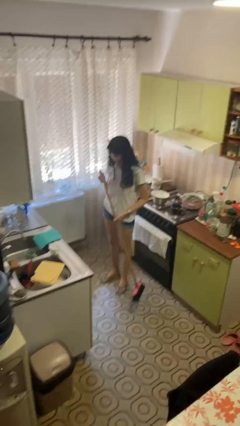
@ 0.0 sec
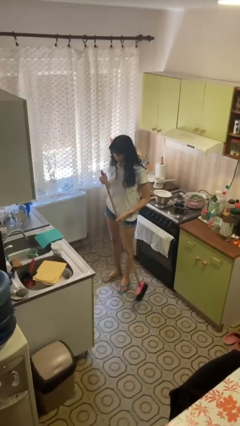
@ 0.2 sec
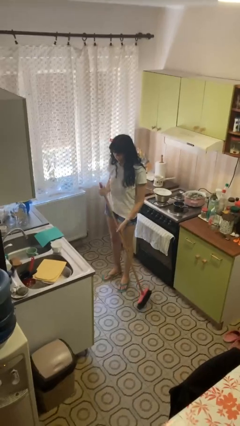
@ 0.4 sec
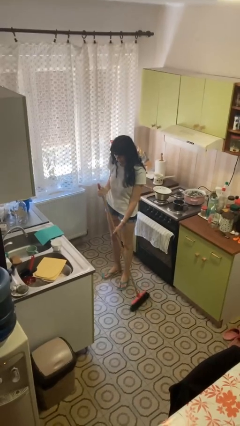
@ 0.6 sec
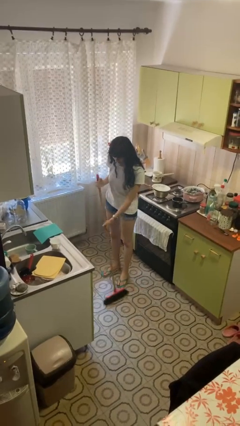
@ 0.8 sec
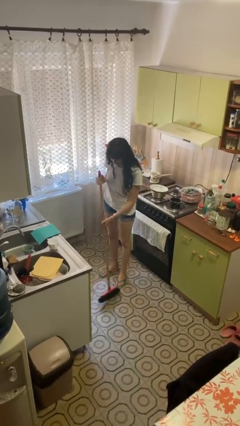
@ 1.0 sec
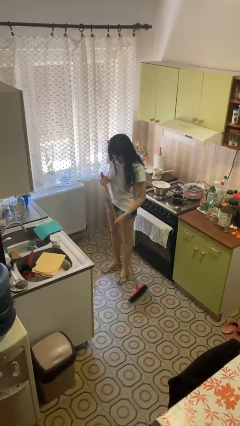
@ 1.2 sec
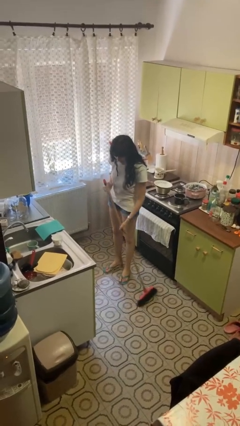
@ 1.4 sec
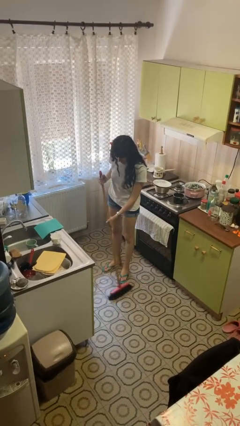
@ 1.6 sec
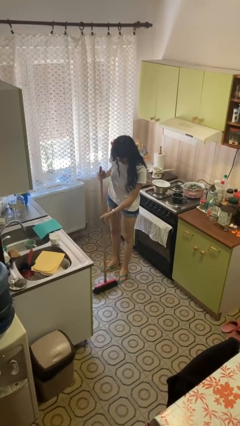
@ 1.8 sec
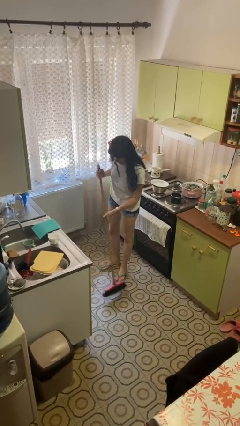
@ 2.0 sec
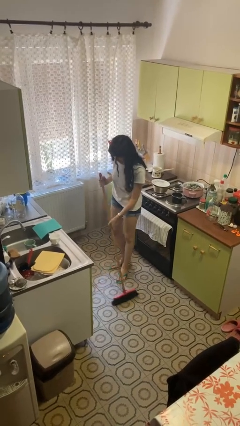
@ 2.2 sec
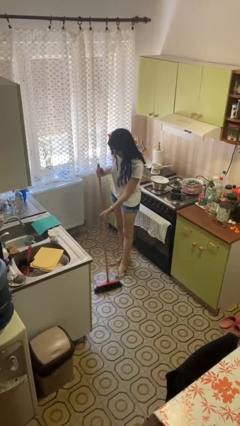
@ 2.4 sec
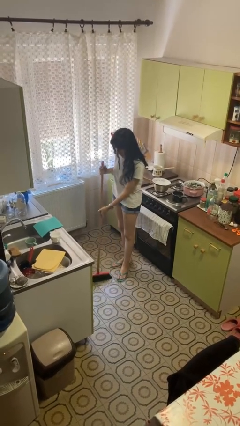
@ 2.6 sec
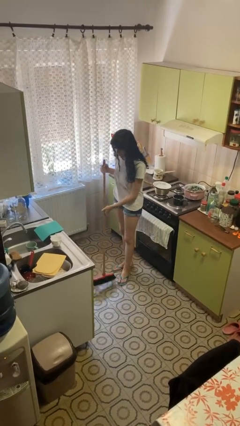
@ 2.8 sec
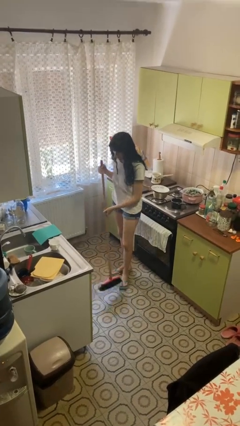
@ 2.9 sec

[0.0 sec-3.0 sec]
person sweeps floor

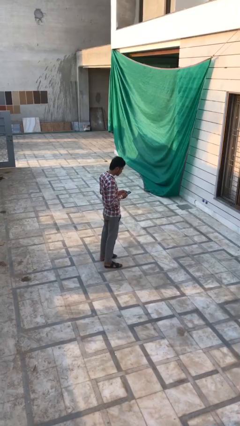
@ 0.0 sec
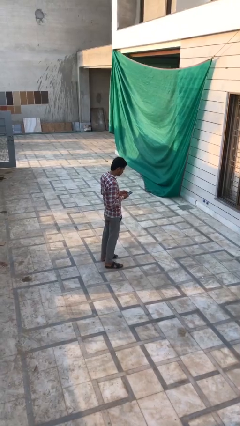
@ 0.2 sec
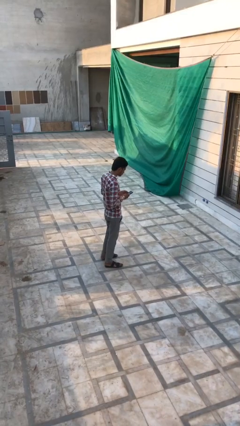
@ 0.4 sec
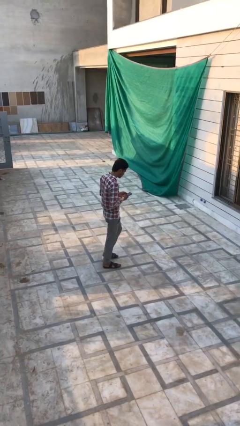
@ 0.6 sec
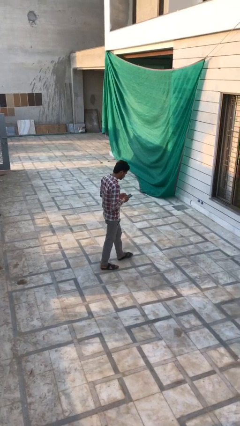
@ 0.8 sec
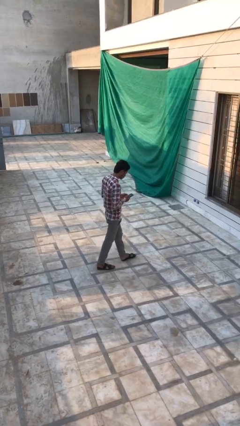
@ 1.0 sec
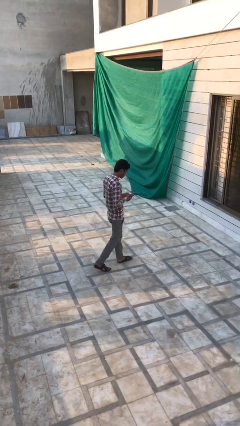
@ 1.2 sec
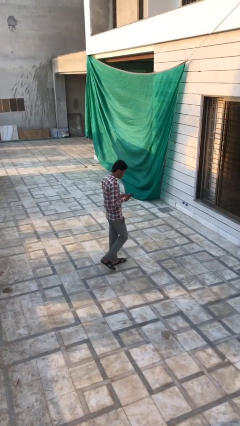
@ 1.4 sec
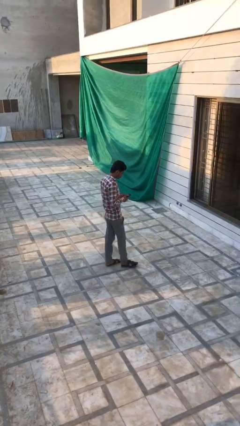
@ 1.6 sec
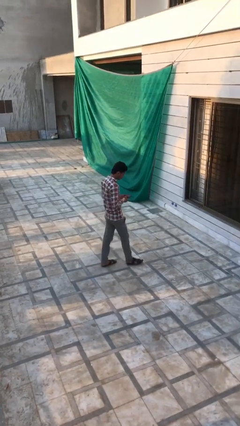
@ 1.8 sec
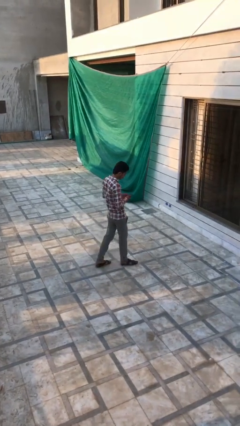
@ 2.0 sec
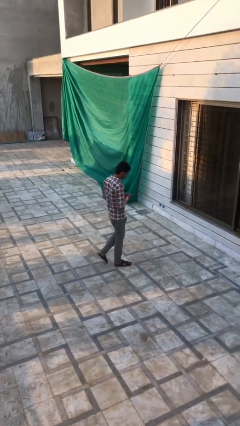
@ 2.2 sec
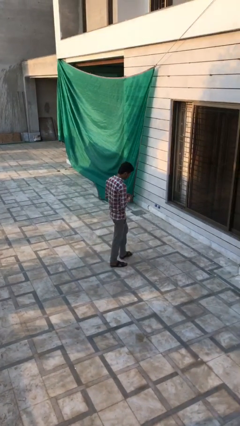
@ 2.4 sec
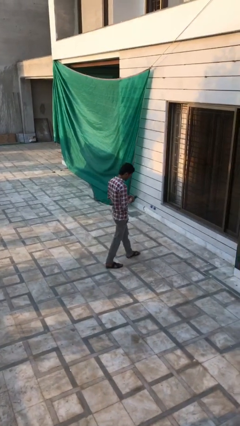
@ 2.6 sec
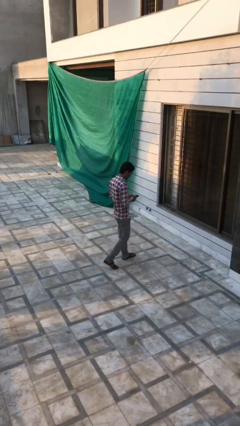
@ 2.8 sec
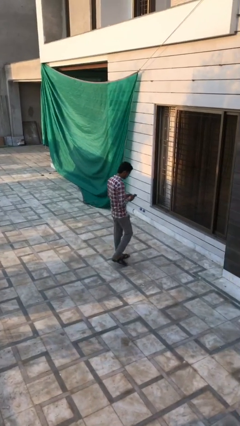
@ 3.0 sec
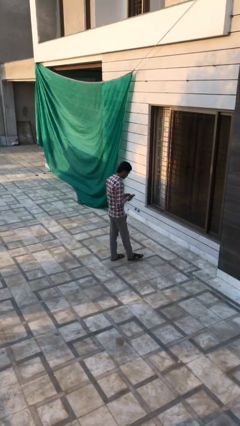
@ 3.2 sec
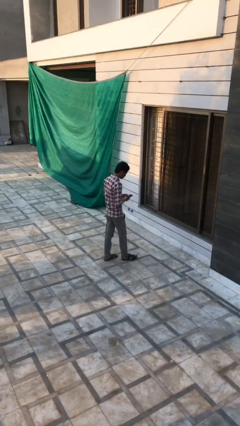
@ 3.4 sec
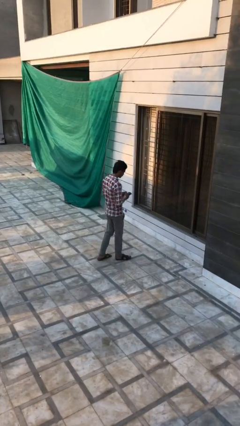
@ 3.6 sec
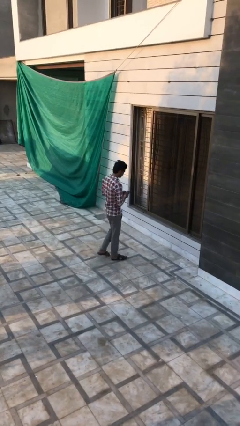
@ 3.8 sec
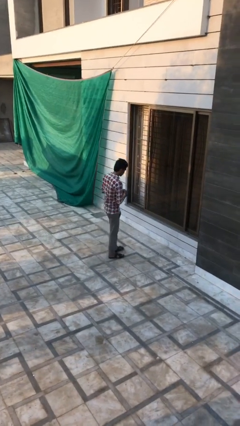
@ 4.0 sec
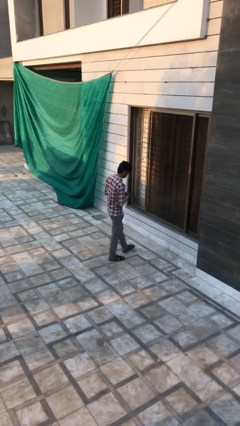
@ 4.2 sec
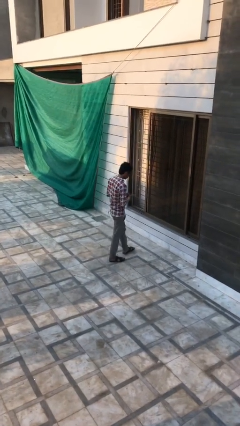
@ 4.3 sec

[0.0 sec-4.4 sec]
person texts on phone

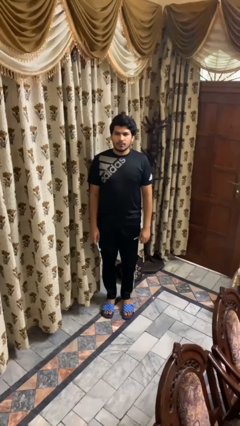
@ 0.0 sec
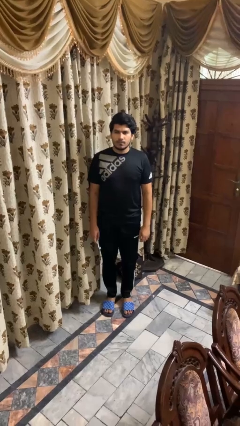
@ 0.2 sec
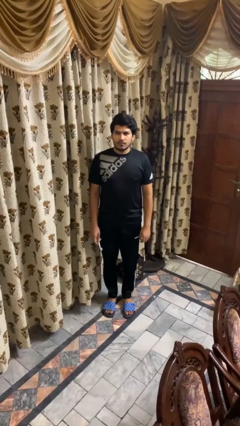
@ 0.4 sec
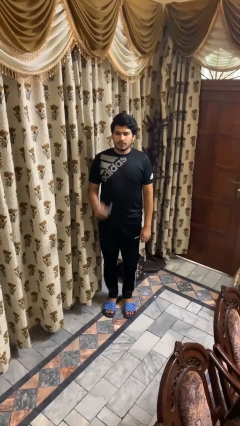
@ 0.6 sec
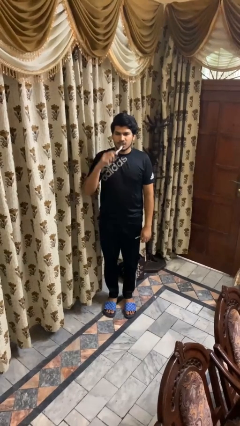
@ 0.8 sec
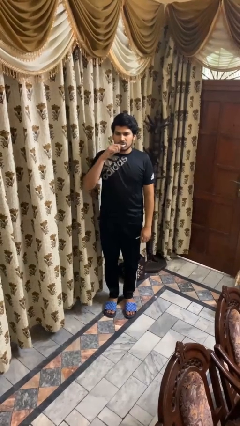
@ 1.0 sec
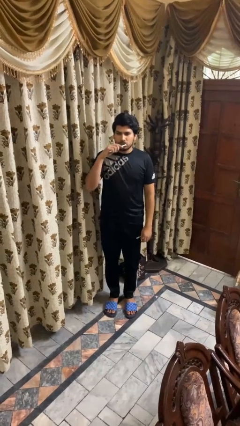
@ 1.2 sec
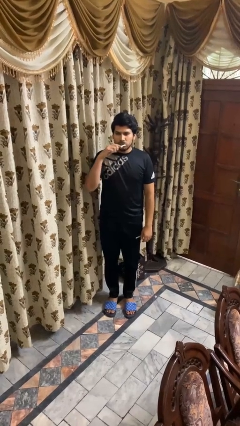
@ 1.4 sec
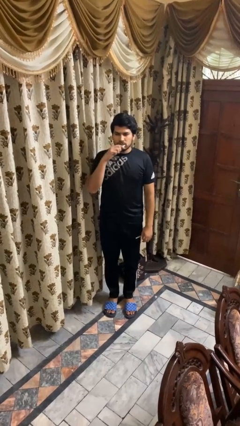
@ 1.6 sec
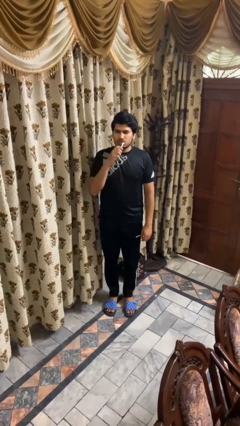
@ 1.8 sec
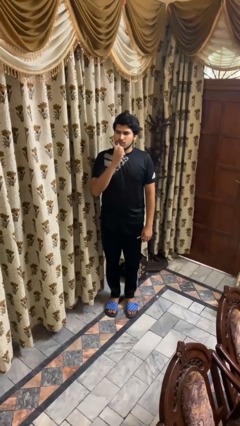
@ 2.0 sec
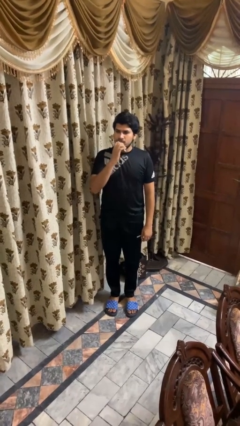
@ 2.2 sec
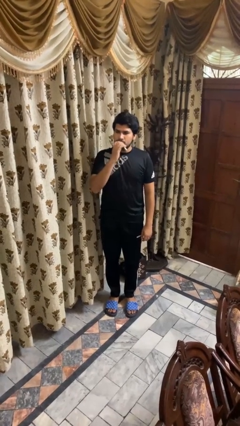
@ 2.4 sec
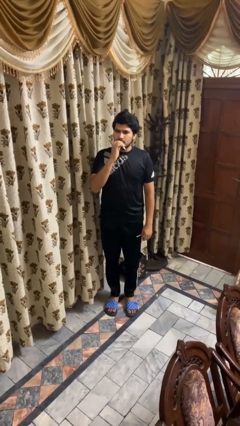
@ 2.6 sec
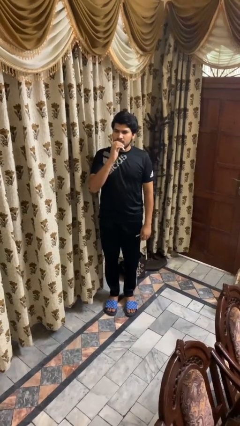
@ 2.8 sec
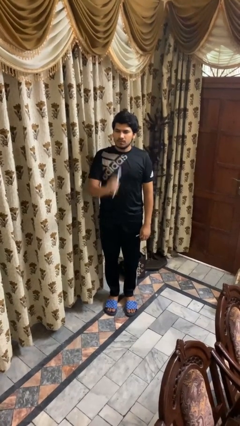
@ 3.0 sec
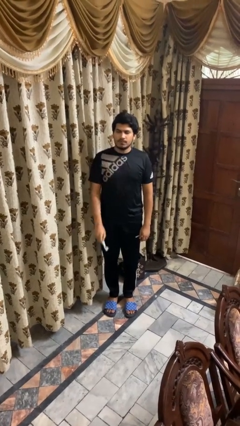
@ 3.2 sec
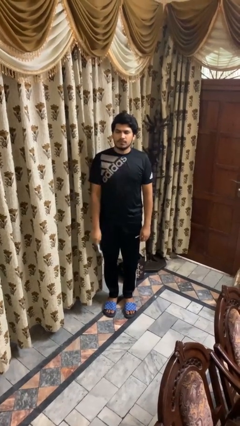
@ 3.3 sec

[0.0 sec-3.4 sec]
person brushes teeth

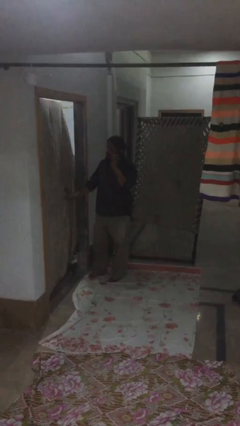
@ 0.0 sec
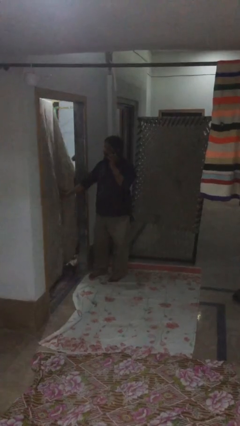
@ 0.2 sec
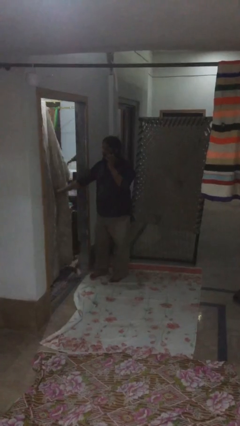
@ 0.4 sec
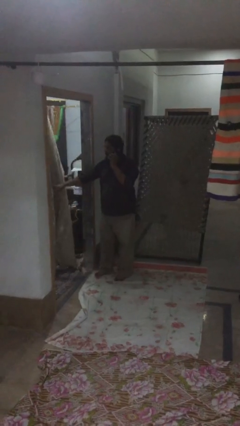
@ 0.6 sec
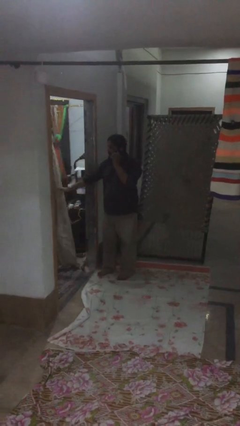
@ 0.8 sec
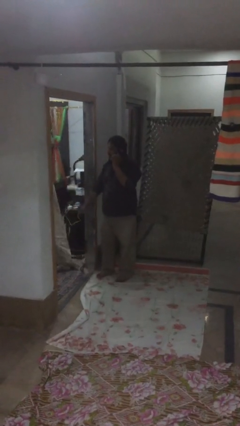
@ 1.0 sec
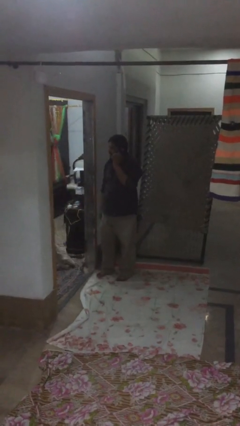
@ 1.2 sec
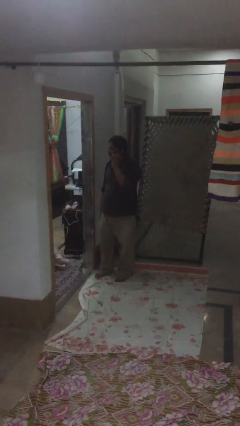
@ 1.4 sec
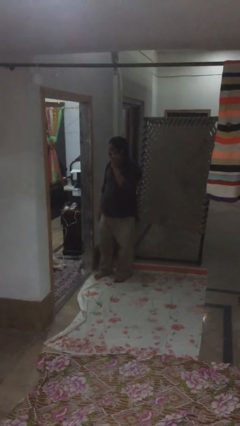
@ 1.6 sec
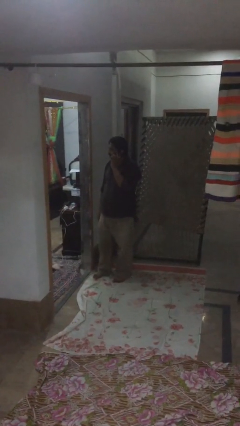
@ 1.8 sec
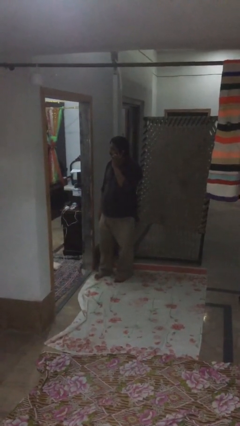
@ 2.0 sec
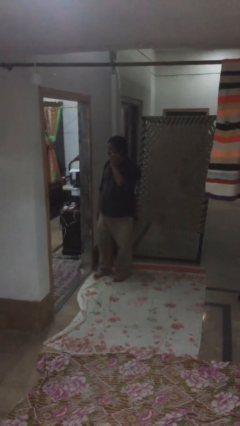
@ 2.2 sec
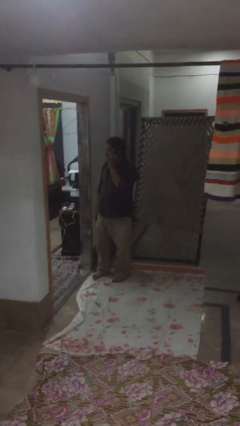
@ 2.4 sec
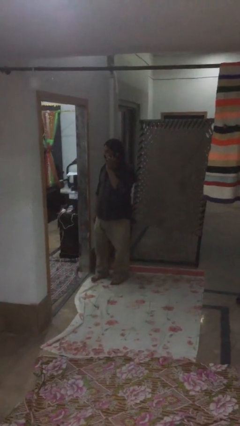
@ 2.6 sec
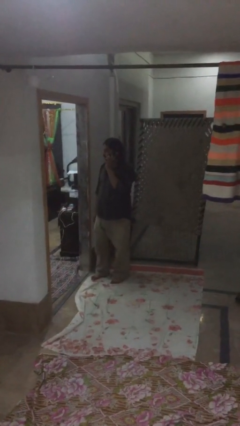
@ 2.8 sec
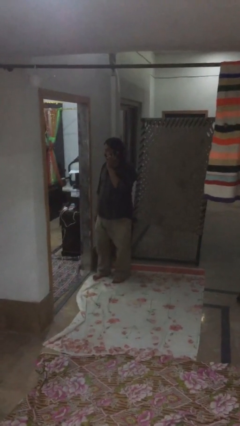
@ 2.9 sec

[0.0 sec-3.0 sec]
person opens facility door

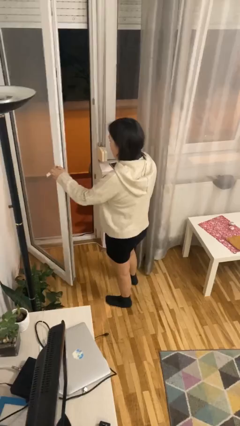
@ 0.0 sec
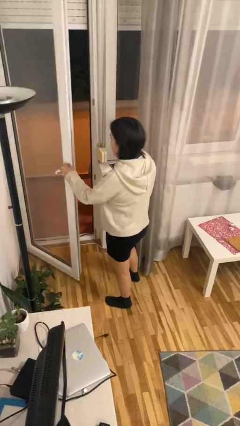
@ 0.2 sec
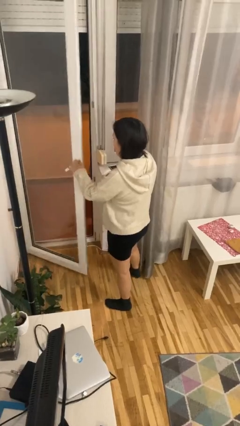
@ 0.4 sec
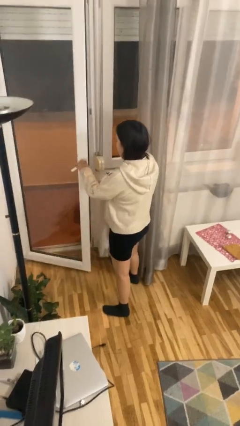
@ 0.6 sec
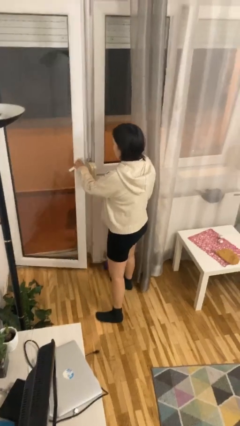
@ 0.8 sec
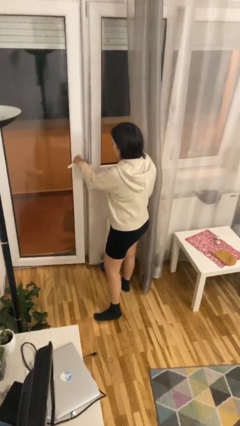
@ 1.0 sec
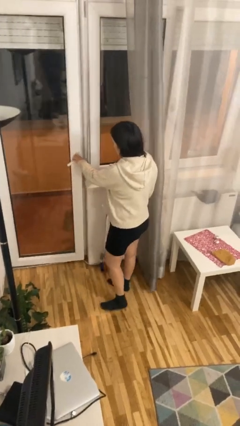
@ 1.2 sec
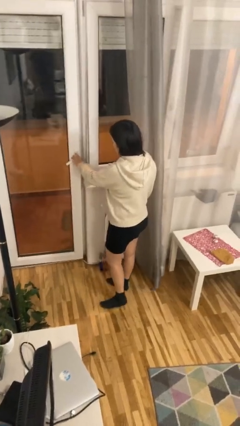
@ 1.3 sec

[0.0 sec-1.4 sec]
person closes facility door

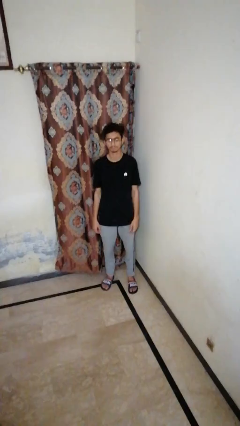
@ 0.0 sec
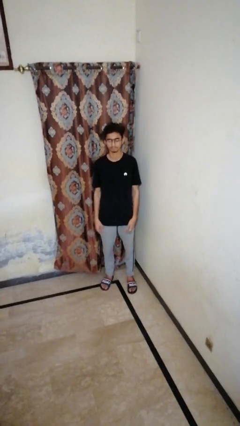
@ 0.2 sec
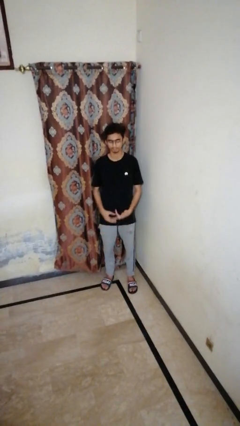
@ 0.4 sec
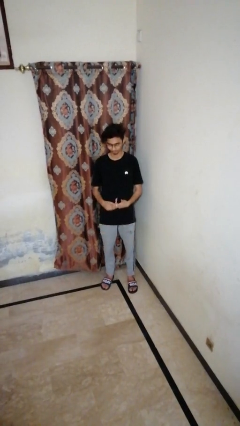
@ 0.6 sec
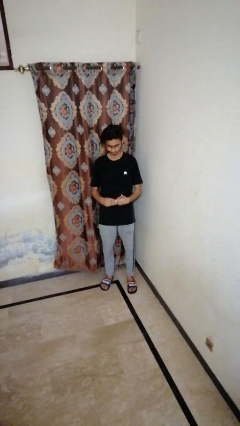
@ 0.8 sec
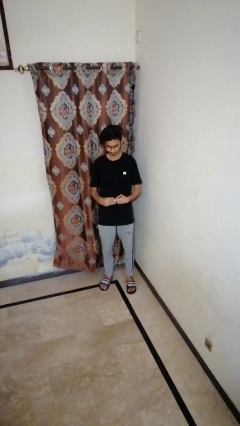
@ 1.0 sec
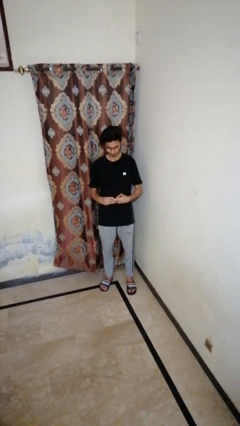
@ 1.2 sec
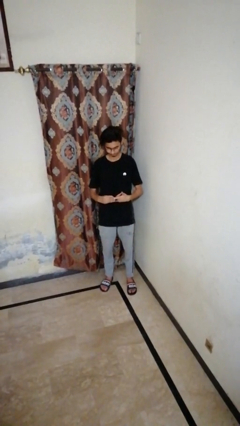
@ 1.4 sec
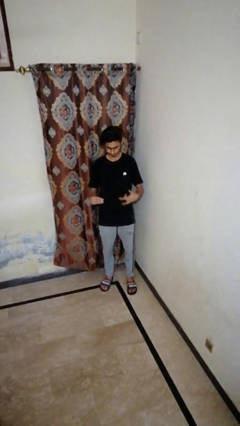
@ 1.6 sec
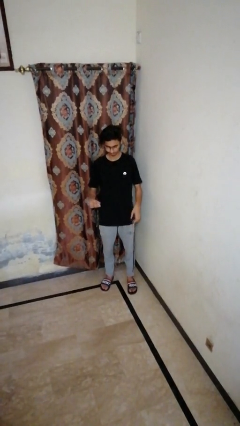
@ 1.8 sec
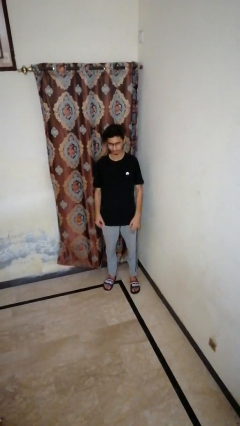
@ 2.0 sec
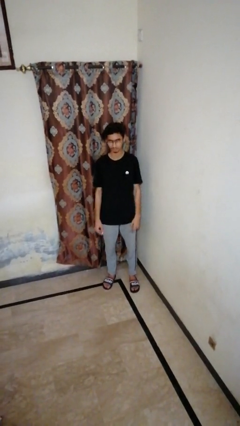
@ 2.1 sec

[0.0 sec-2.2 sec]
person takes off ring
